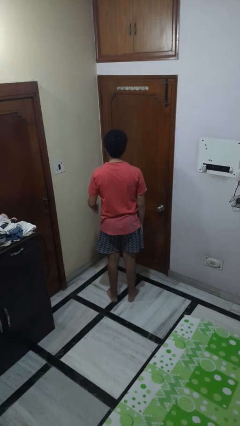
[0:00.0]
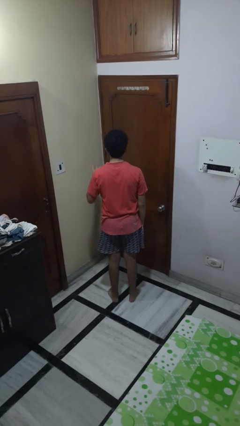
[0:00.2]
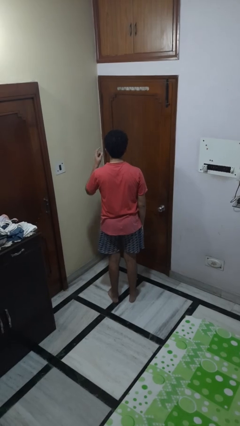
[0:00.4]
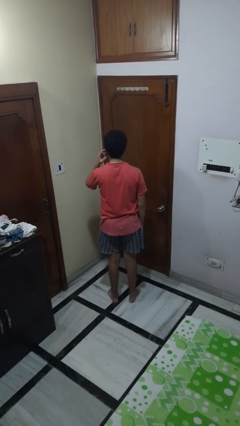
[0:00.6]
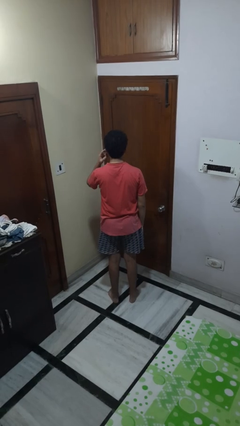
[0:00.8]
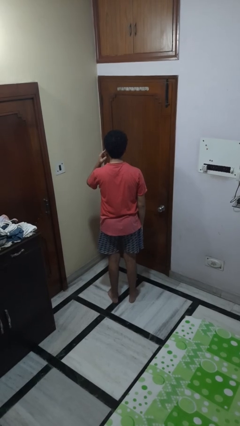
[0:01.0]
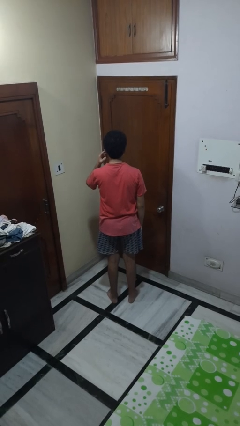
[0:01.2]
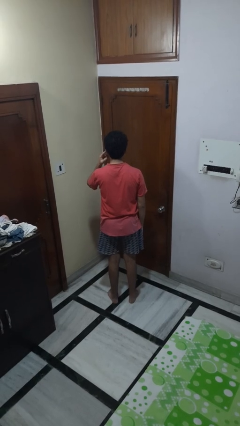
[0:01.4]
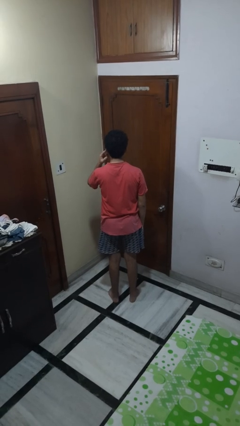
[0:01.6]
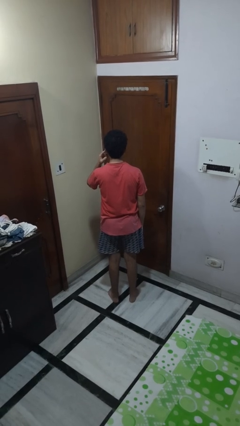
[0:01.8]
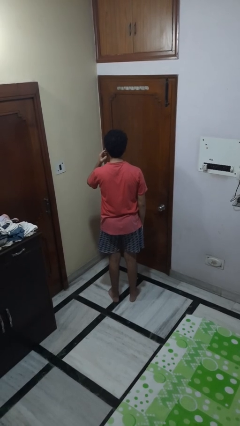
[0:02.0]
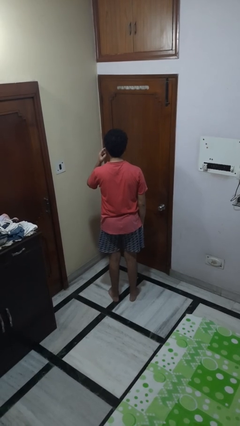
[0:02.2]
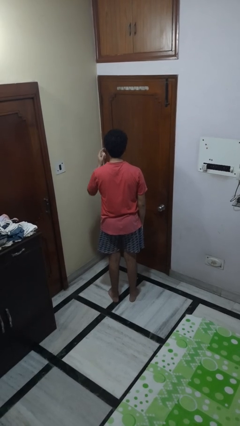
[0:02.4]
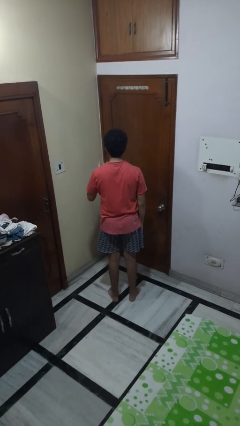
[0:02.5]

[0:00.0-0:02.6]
person gestures listen closely

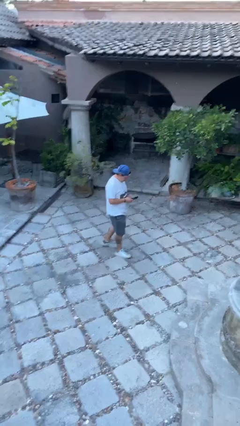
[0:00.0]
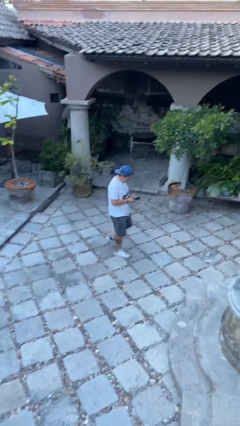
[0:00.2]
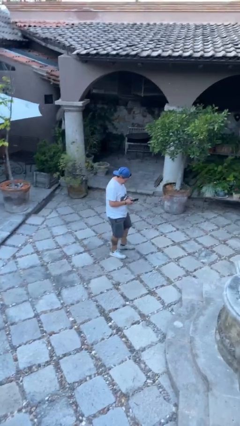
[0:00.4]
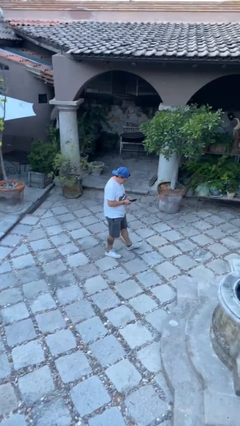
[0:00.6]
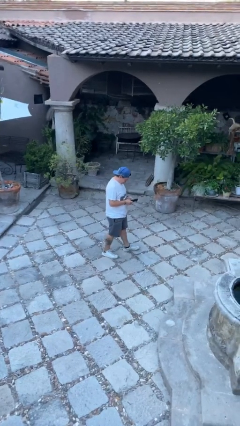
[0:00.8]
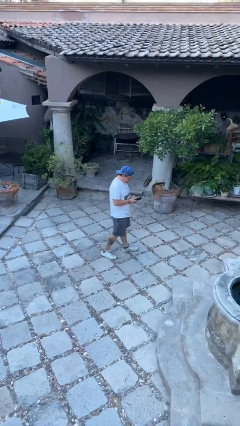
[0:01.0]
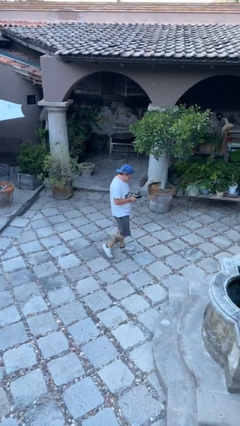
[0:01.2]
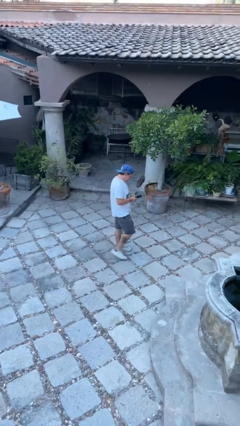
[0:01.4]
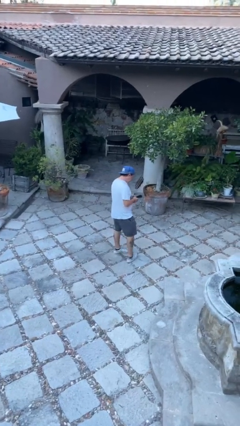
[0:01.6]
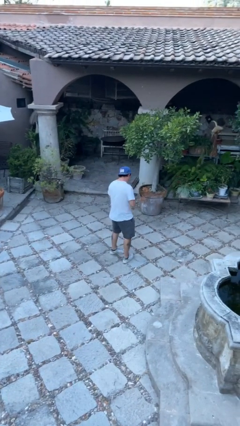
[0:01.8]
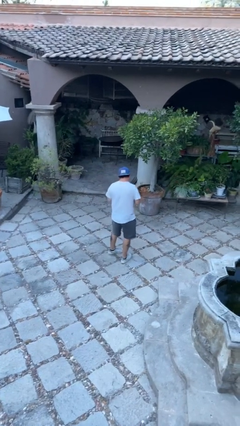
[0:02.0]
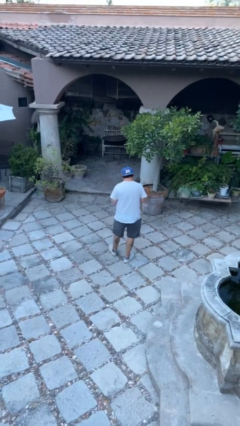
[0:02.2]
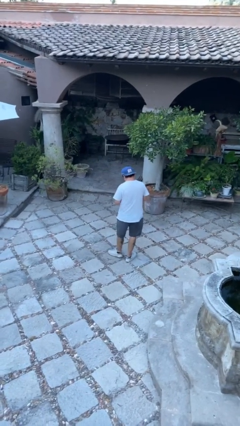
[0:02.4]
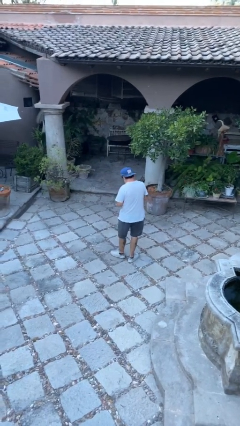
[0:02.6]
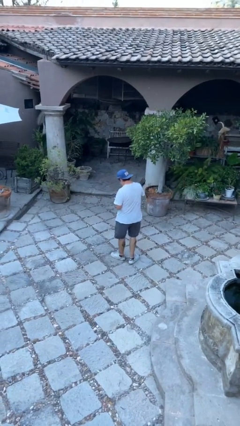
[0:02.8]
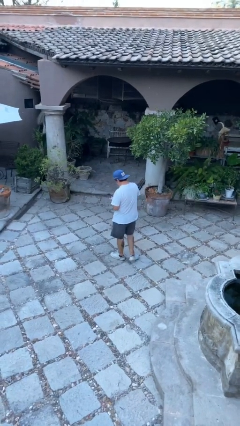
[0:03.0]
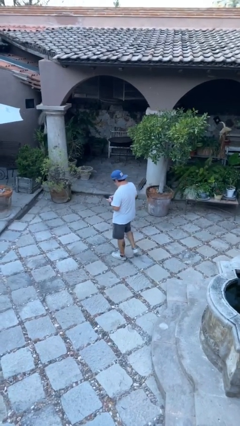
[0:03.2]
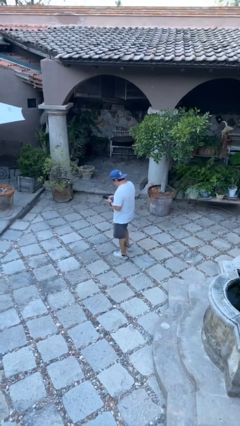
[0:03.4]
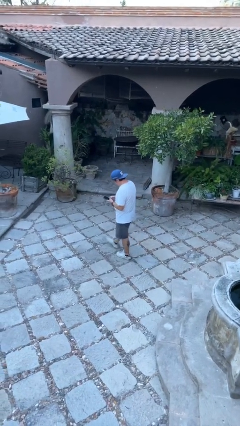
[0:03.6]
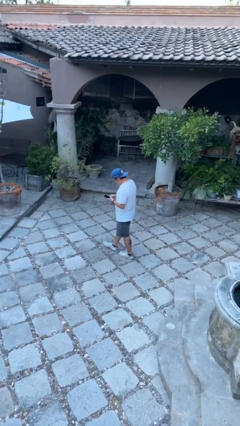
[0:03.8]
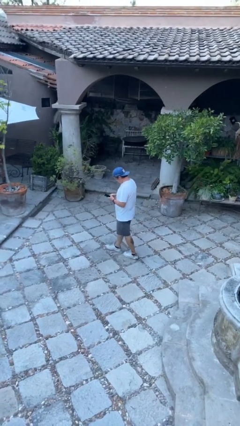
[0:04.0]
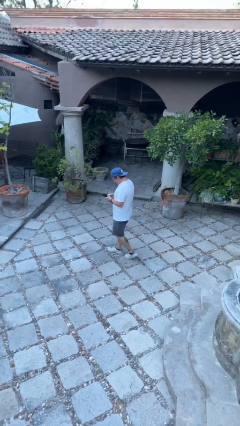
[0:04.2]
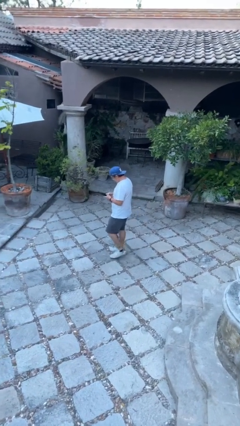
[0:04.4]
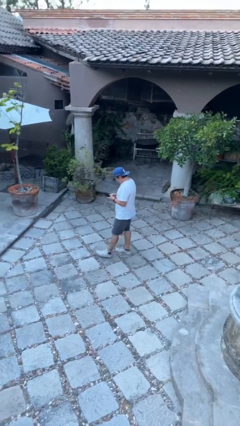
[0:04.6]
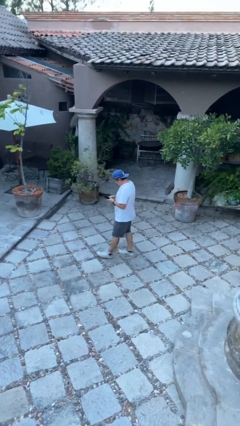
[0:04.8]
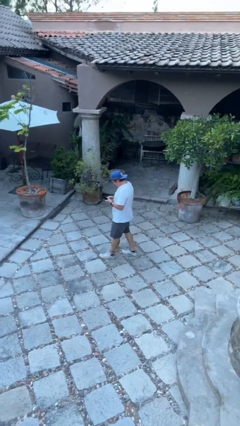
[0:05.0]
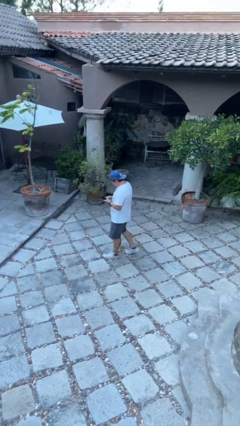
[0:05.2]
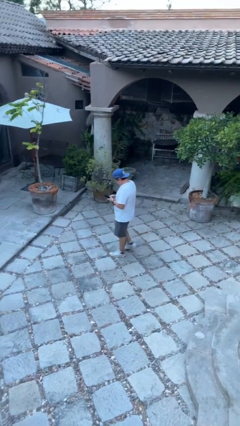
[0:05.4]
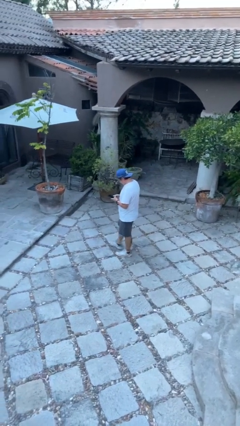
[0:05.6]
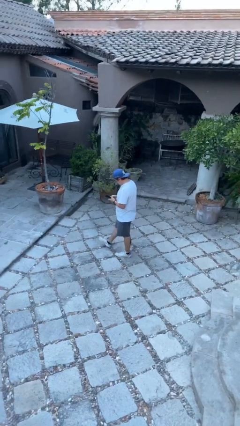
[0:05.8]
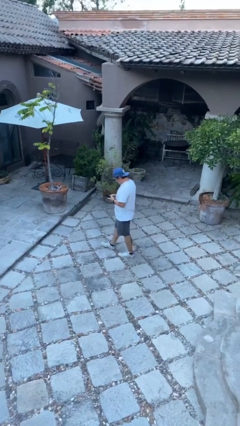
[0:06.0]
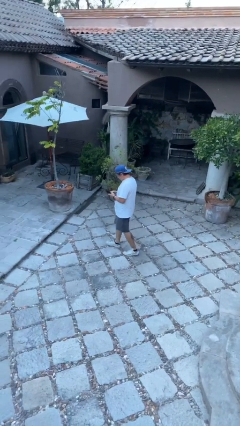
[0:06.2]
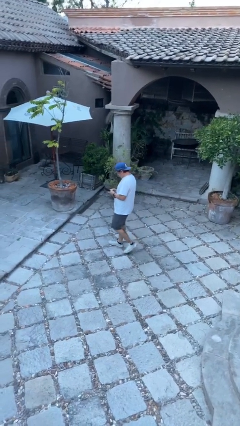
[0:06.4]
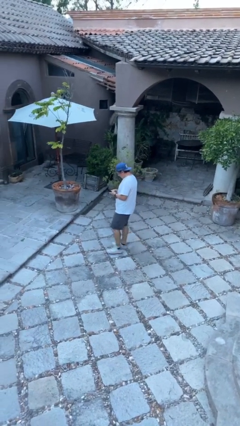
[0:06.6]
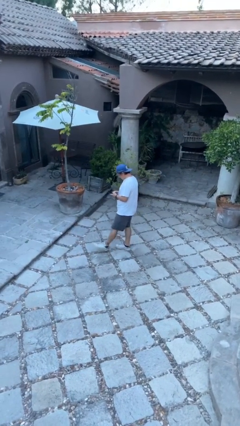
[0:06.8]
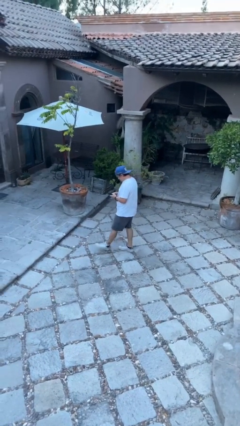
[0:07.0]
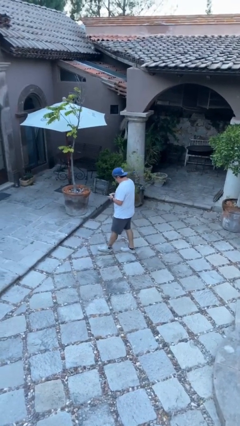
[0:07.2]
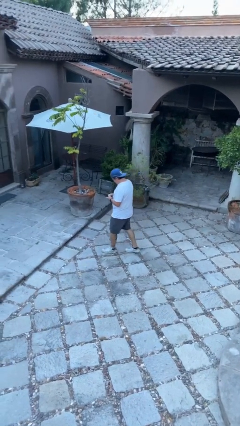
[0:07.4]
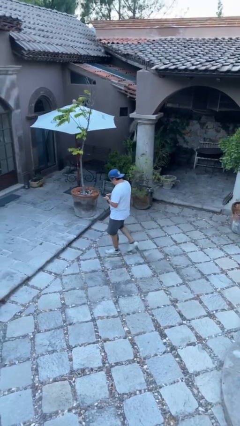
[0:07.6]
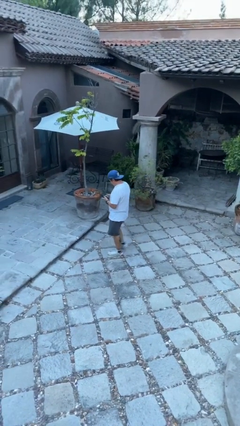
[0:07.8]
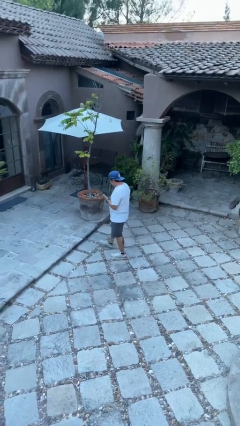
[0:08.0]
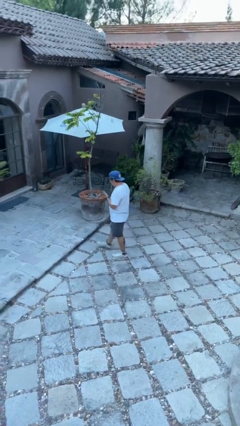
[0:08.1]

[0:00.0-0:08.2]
person texts on phone

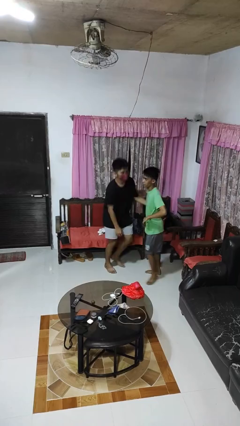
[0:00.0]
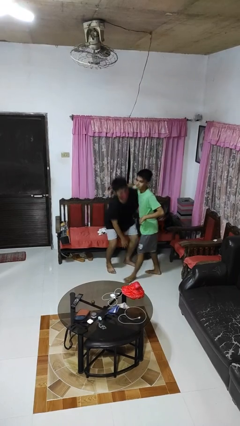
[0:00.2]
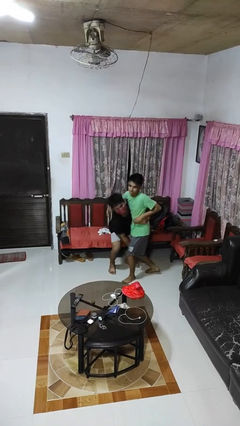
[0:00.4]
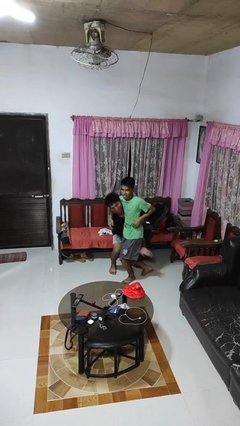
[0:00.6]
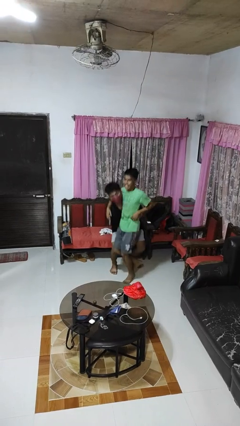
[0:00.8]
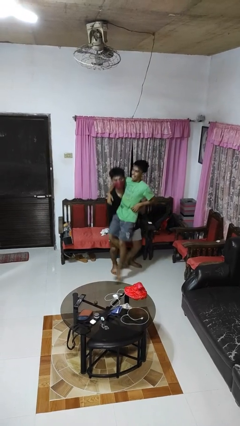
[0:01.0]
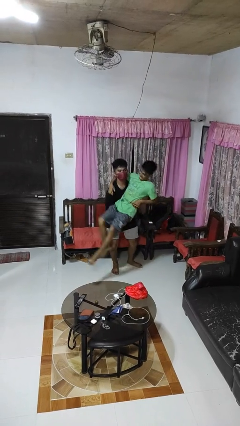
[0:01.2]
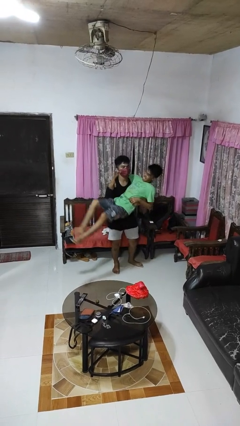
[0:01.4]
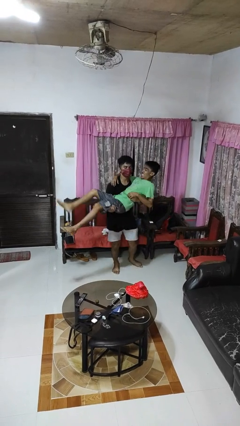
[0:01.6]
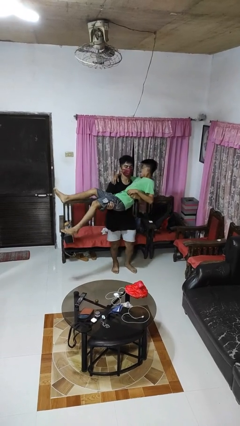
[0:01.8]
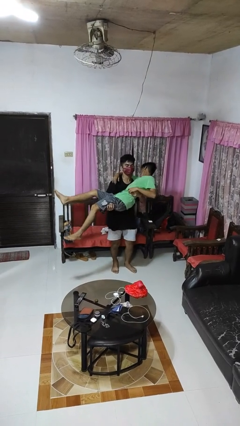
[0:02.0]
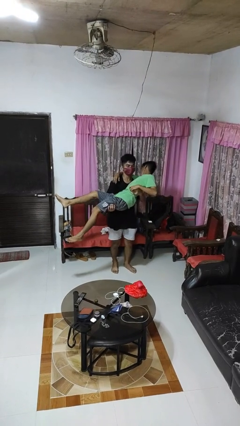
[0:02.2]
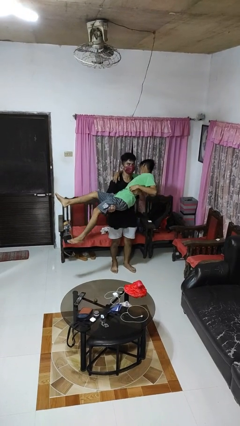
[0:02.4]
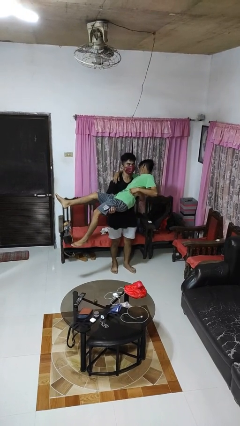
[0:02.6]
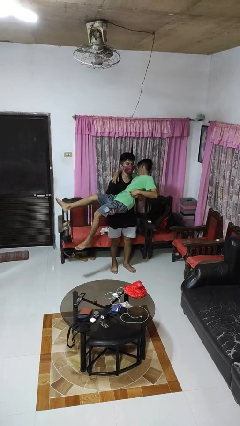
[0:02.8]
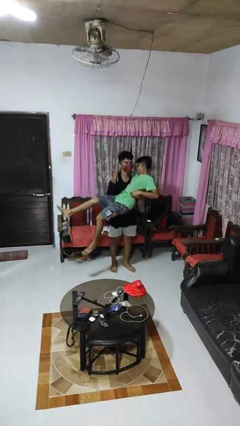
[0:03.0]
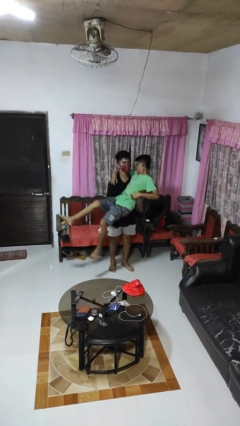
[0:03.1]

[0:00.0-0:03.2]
person picks up person

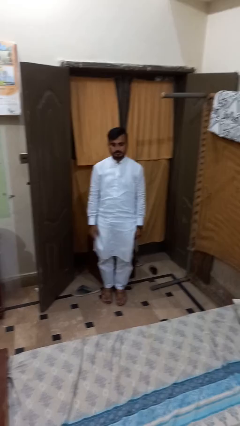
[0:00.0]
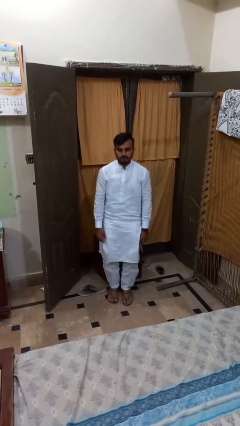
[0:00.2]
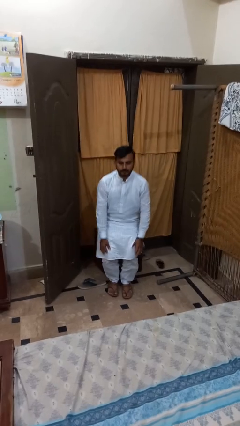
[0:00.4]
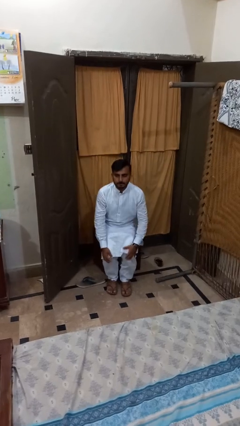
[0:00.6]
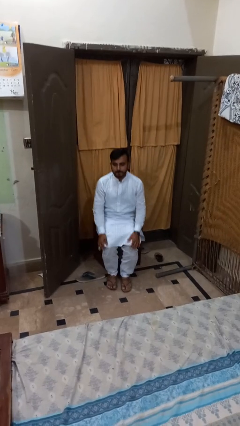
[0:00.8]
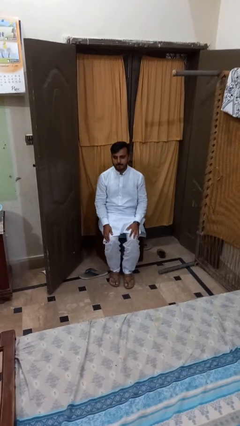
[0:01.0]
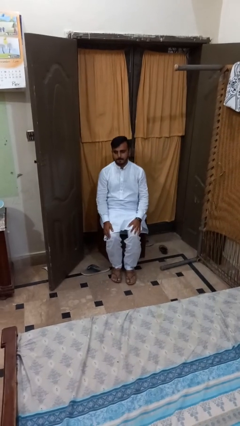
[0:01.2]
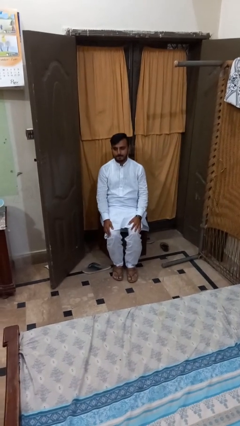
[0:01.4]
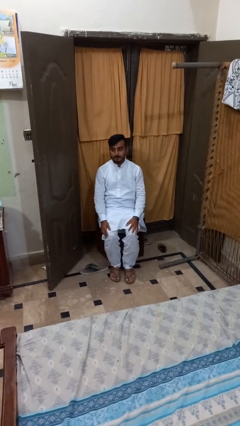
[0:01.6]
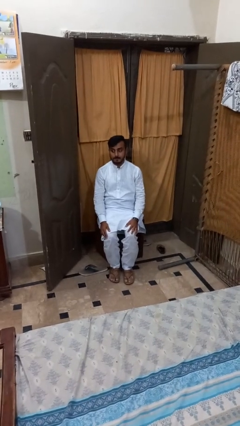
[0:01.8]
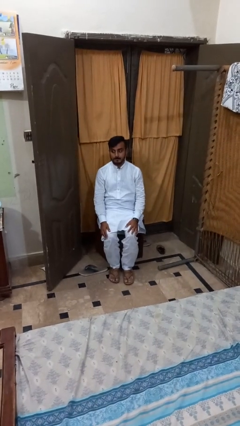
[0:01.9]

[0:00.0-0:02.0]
person sits down

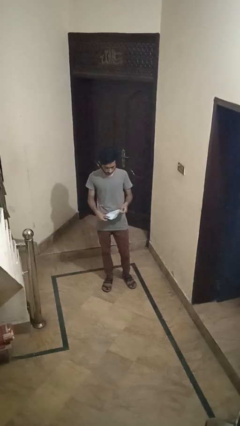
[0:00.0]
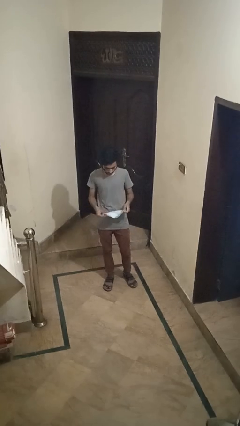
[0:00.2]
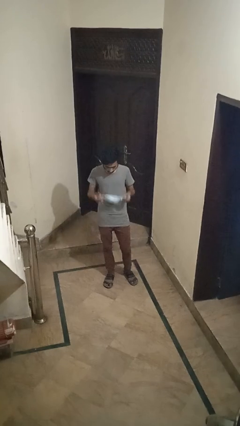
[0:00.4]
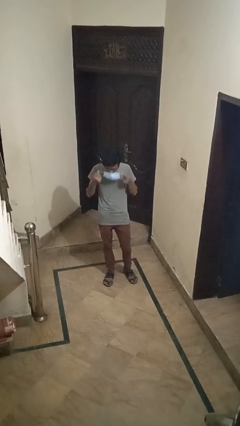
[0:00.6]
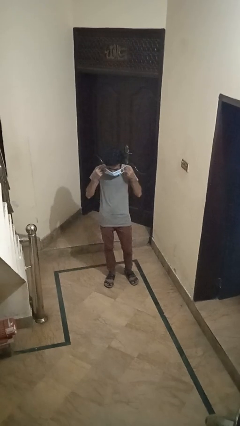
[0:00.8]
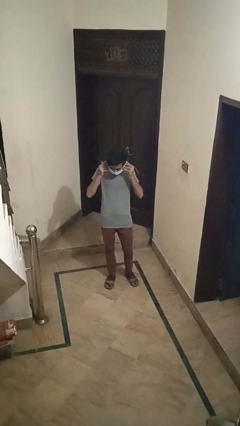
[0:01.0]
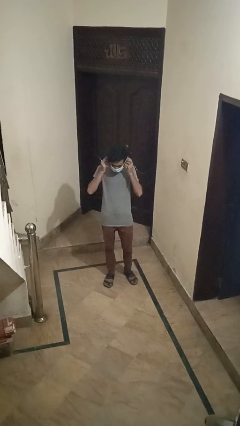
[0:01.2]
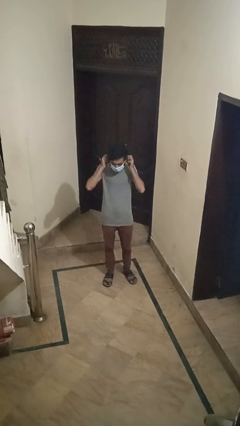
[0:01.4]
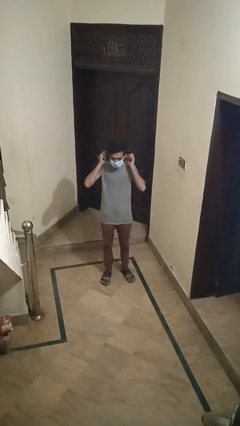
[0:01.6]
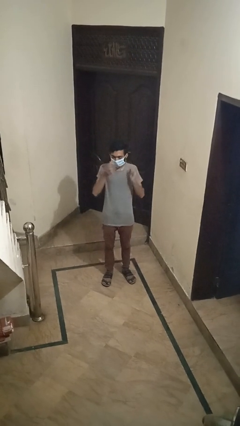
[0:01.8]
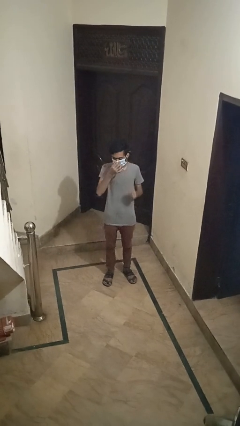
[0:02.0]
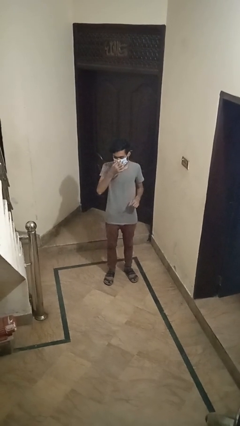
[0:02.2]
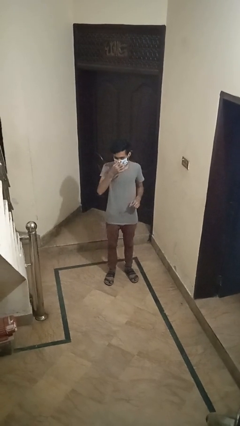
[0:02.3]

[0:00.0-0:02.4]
person puts on facemask
